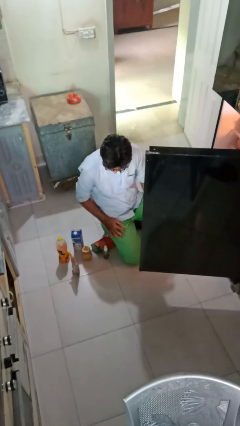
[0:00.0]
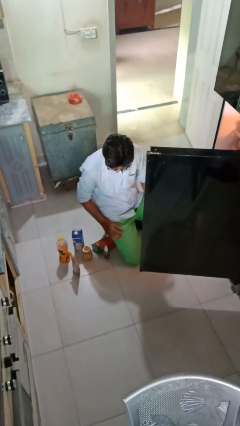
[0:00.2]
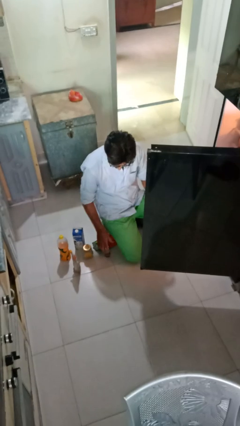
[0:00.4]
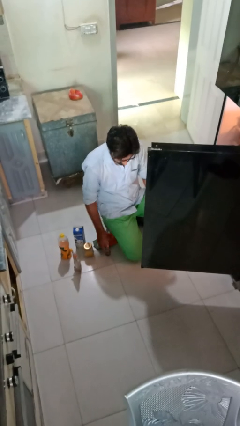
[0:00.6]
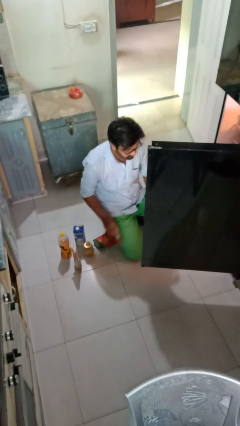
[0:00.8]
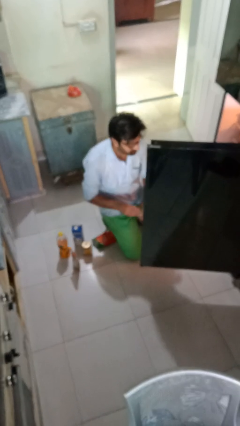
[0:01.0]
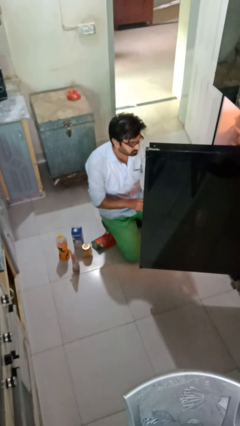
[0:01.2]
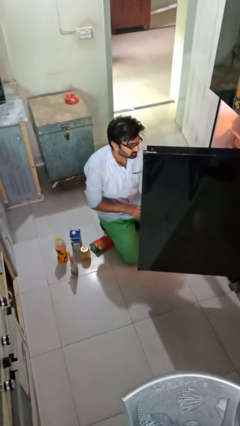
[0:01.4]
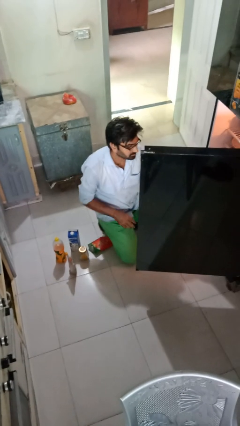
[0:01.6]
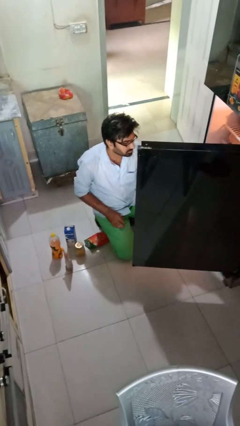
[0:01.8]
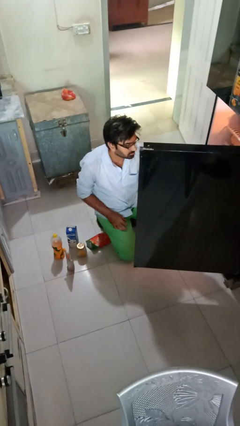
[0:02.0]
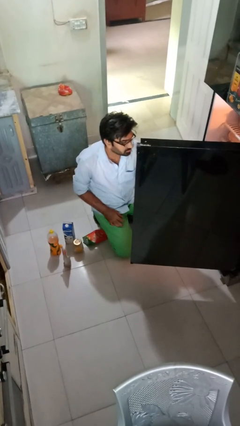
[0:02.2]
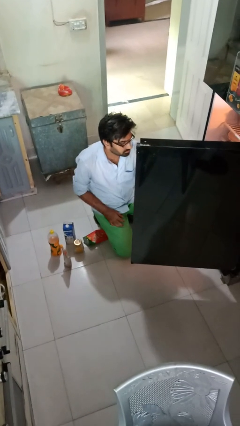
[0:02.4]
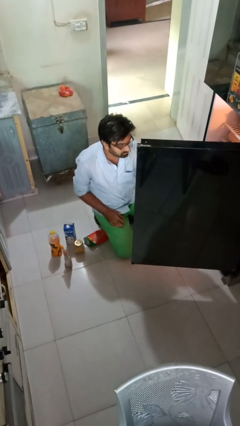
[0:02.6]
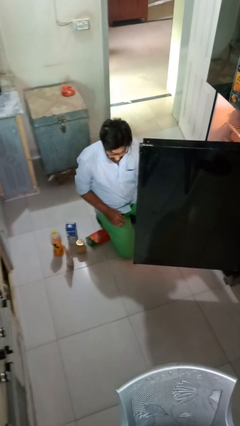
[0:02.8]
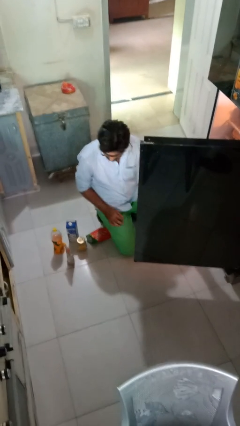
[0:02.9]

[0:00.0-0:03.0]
person loads groceries into refrigerator

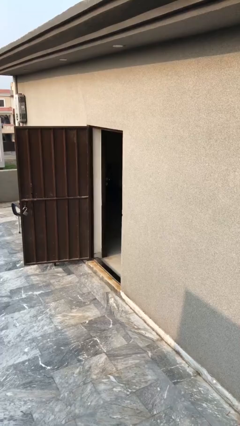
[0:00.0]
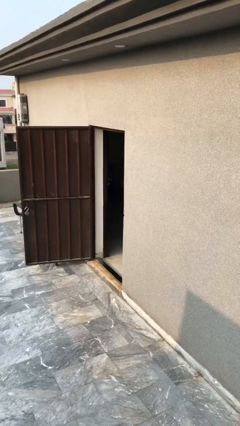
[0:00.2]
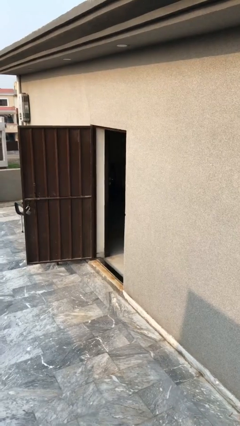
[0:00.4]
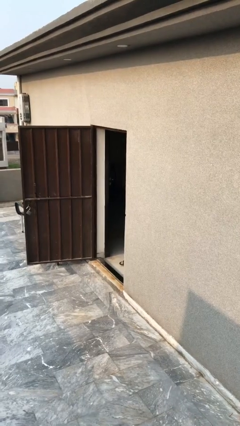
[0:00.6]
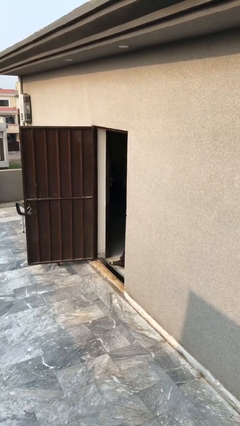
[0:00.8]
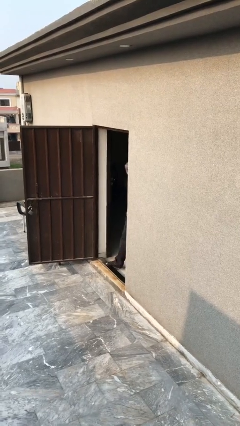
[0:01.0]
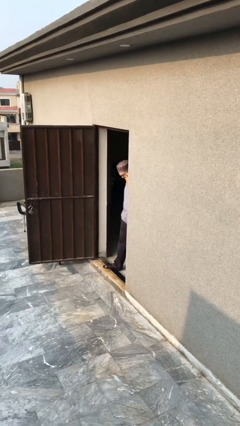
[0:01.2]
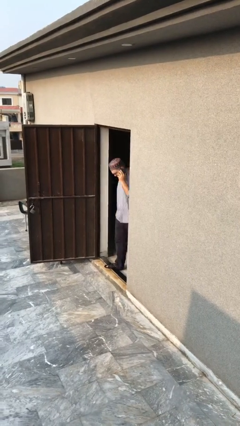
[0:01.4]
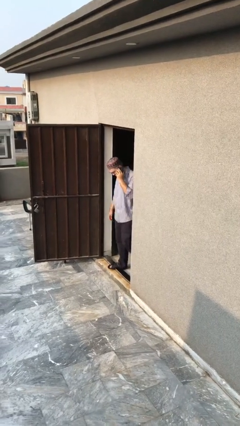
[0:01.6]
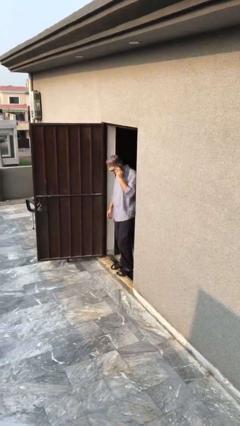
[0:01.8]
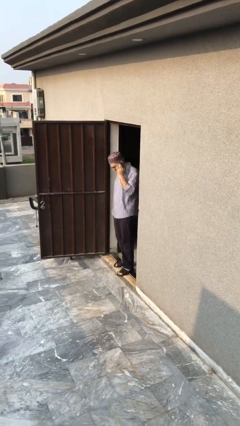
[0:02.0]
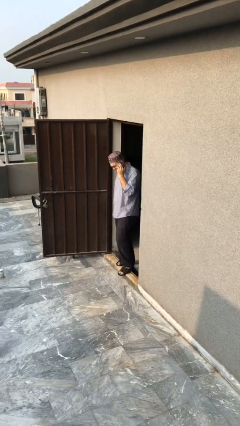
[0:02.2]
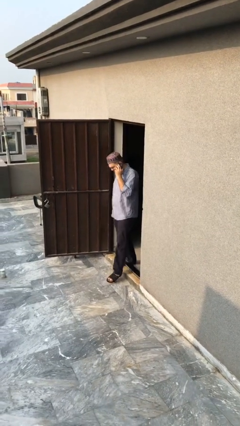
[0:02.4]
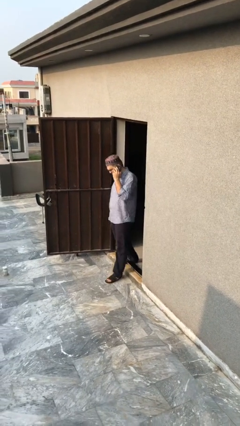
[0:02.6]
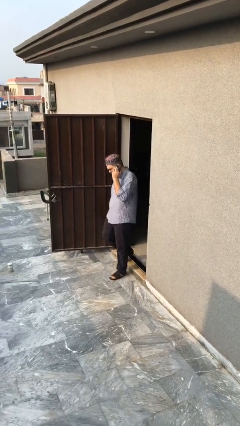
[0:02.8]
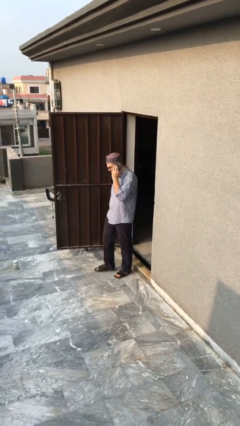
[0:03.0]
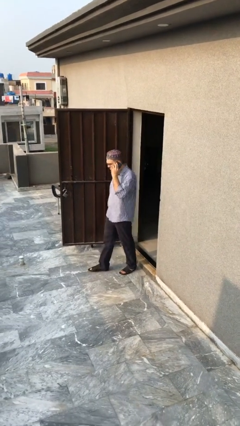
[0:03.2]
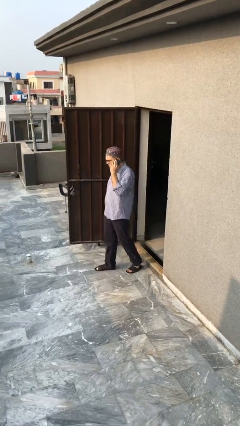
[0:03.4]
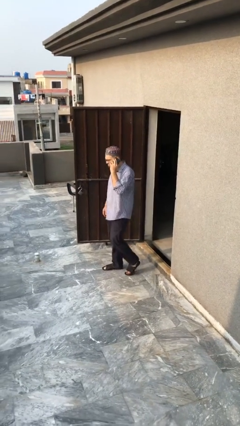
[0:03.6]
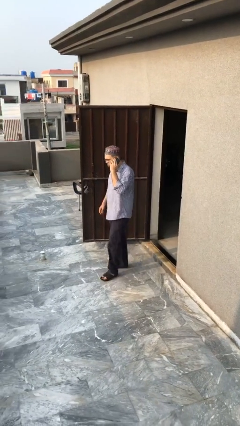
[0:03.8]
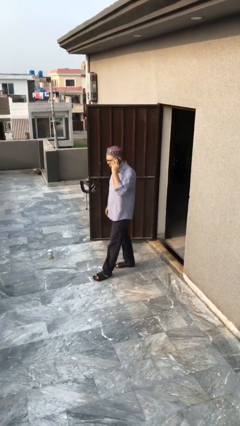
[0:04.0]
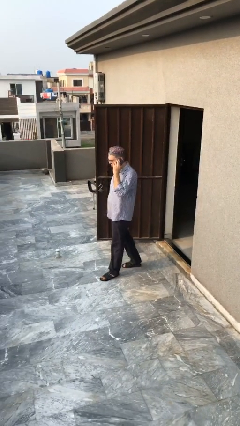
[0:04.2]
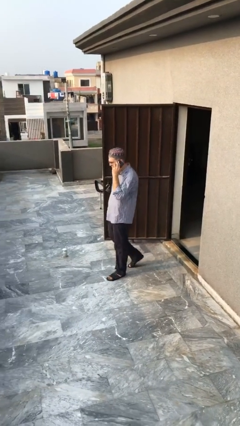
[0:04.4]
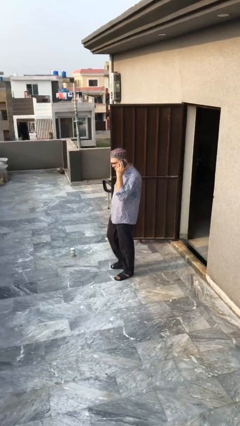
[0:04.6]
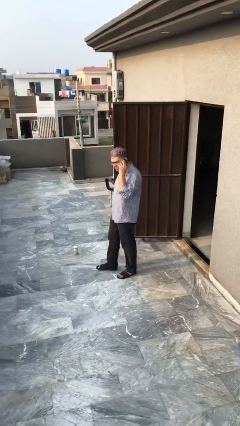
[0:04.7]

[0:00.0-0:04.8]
person enters scene through structure

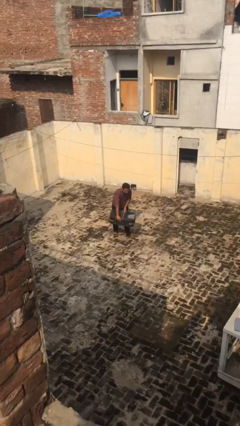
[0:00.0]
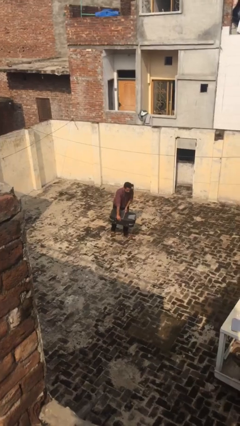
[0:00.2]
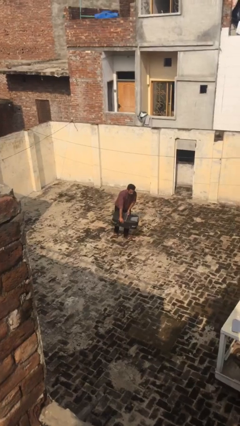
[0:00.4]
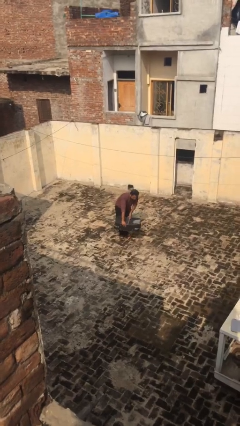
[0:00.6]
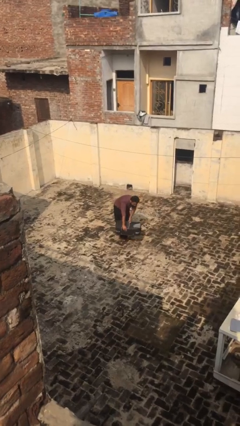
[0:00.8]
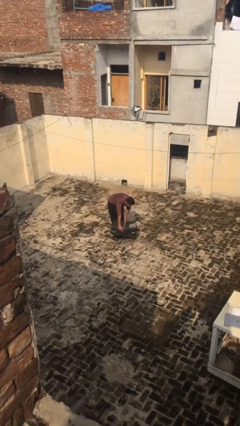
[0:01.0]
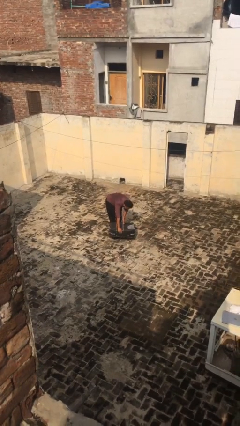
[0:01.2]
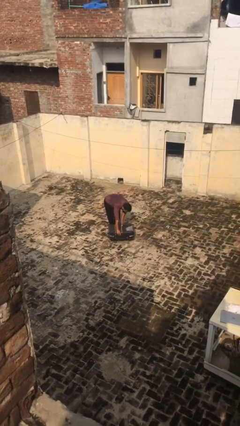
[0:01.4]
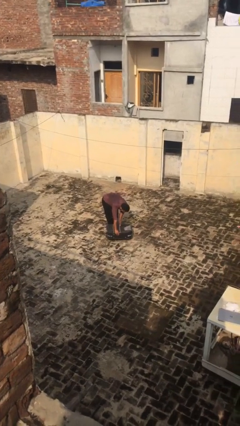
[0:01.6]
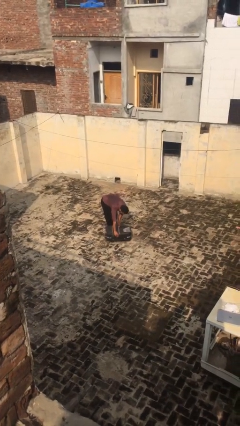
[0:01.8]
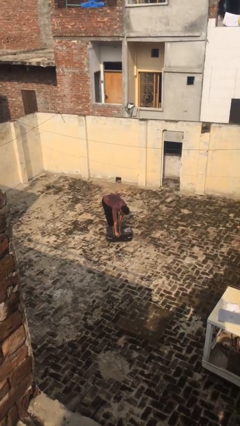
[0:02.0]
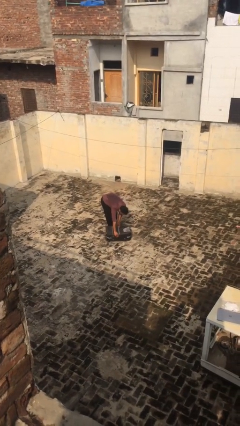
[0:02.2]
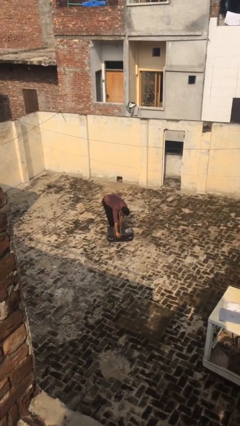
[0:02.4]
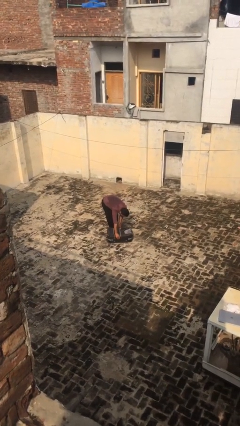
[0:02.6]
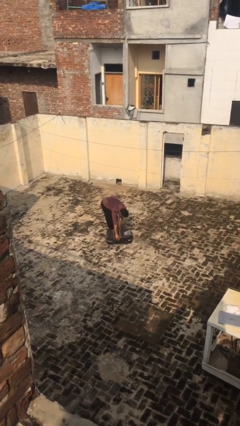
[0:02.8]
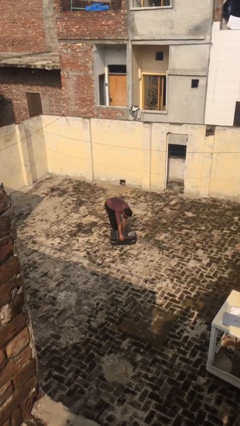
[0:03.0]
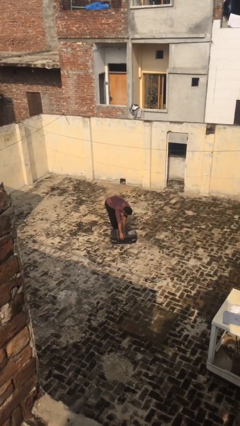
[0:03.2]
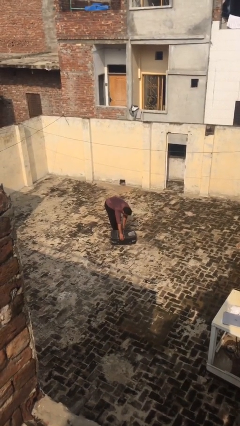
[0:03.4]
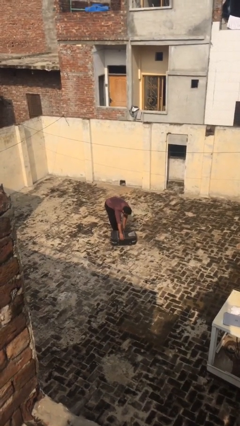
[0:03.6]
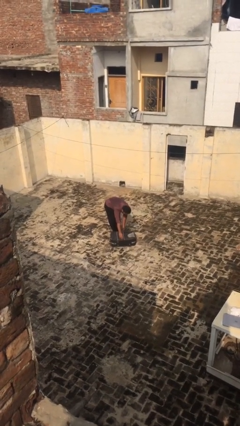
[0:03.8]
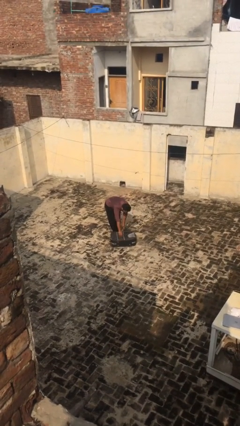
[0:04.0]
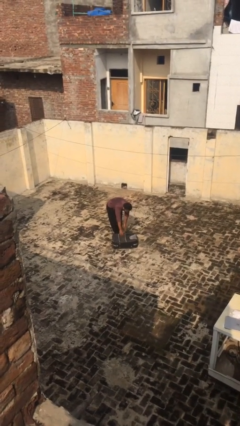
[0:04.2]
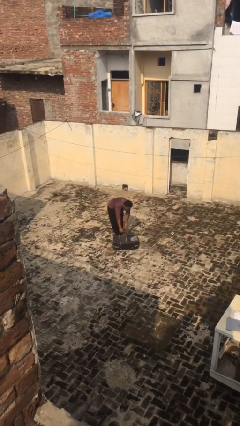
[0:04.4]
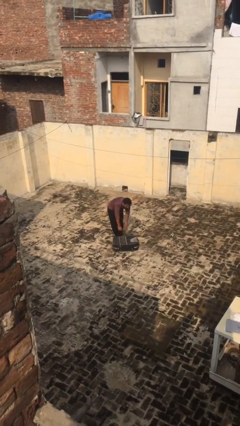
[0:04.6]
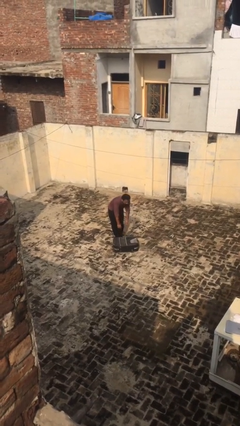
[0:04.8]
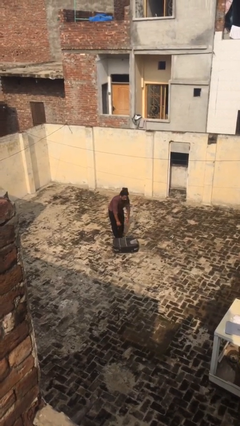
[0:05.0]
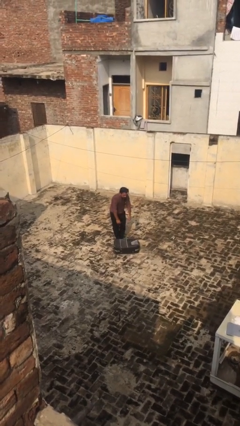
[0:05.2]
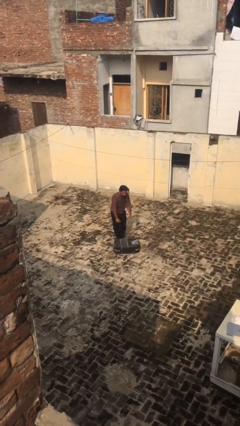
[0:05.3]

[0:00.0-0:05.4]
person puts down object on floor

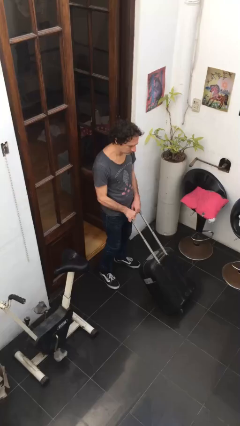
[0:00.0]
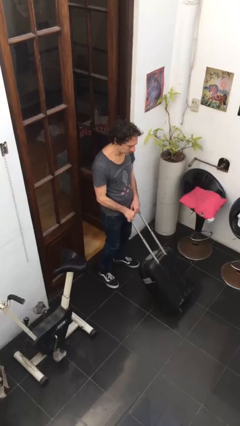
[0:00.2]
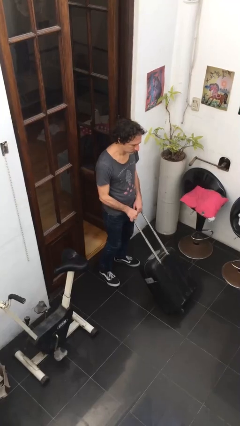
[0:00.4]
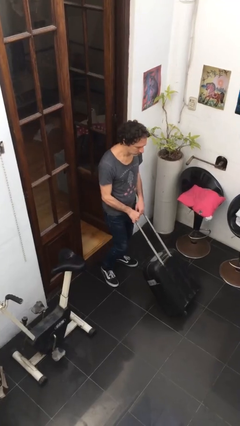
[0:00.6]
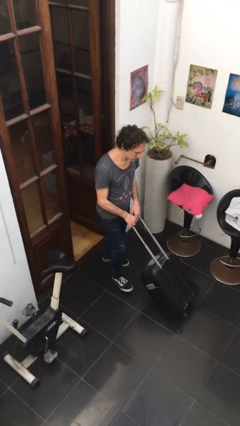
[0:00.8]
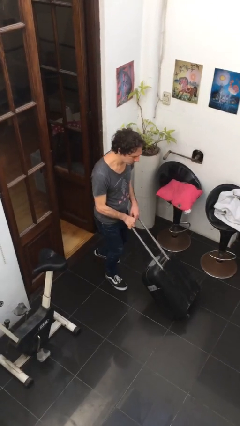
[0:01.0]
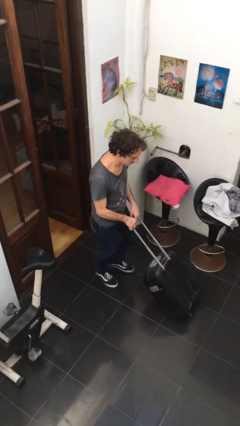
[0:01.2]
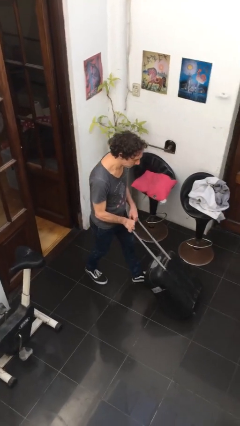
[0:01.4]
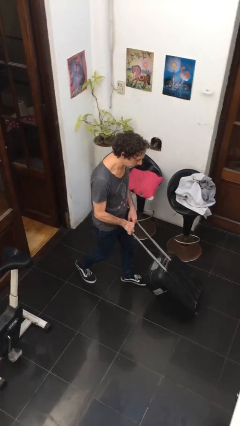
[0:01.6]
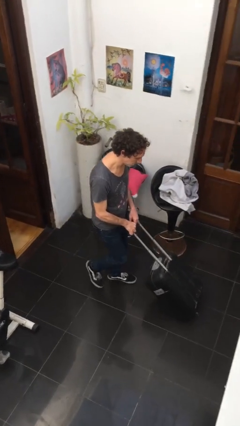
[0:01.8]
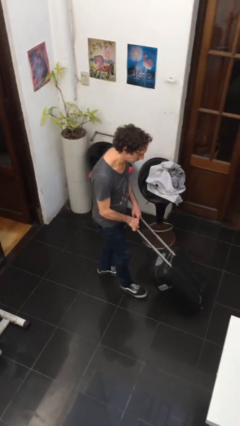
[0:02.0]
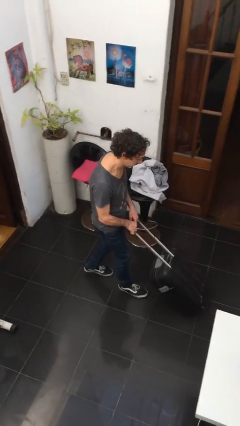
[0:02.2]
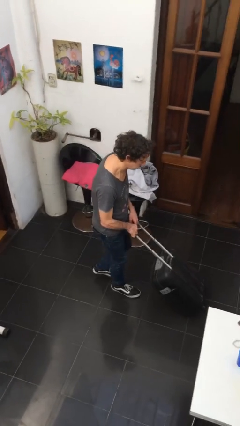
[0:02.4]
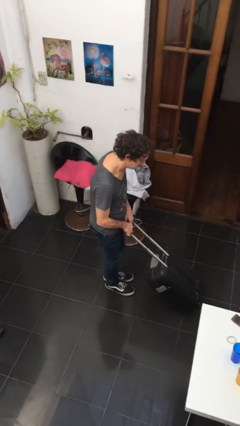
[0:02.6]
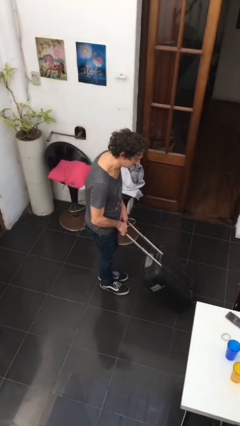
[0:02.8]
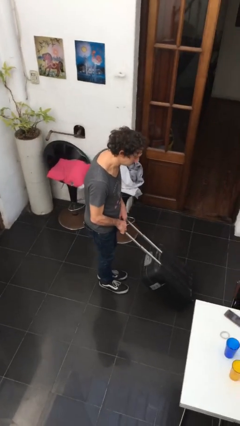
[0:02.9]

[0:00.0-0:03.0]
person pushes wheeled cart

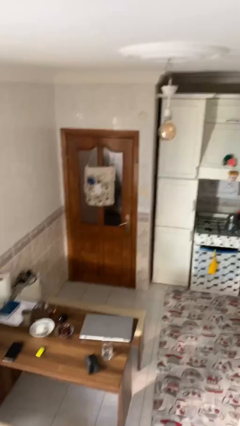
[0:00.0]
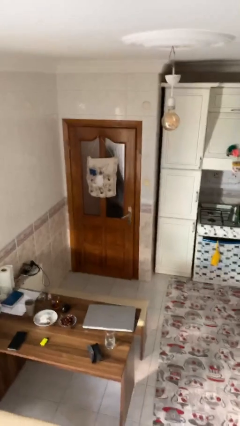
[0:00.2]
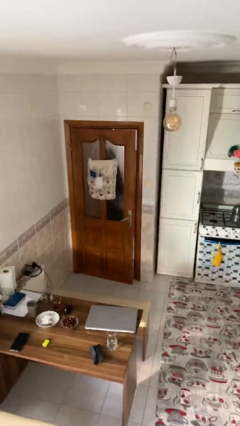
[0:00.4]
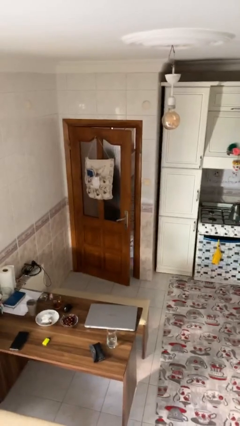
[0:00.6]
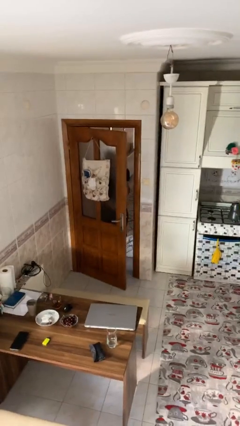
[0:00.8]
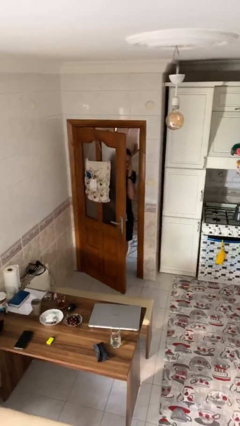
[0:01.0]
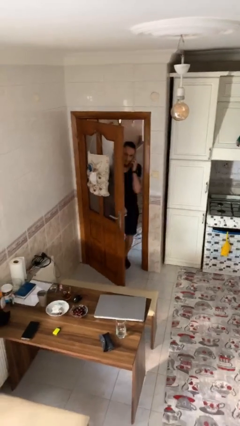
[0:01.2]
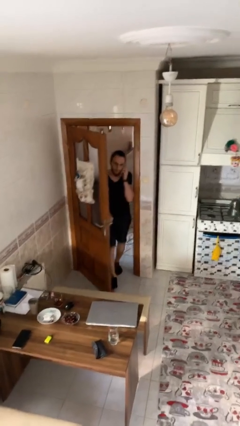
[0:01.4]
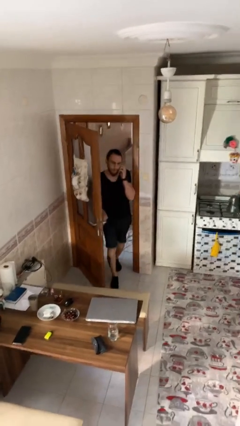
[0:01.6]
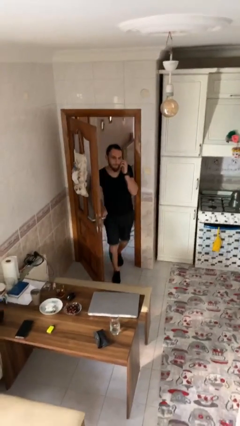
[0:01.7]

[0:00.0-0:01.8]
person opens facility door
